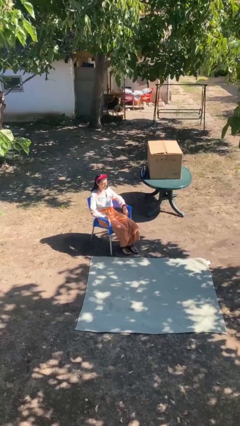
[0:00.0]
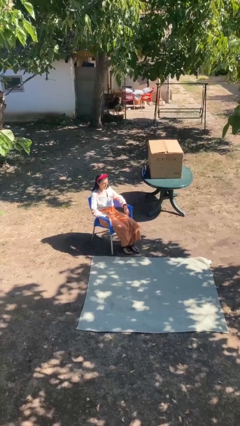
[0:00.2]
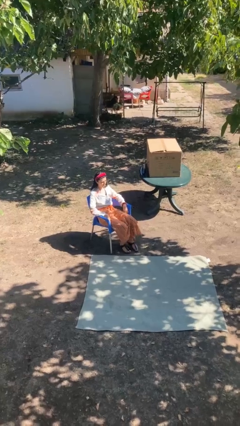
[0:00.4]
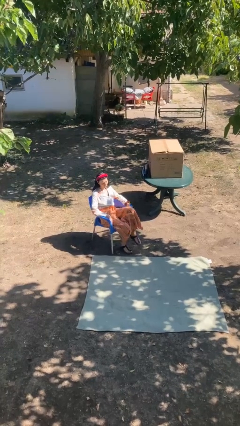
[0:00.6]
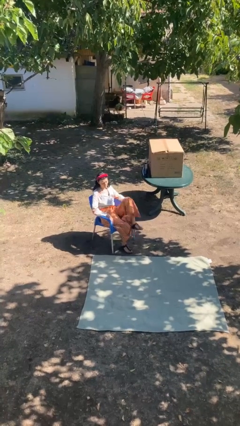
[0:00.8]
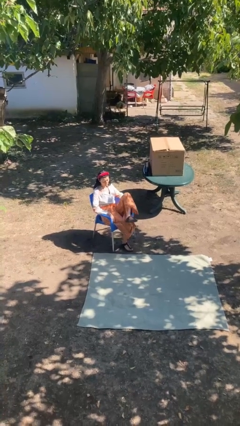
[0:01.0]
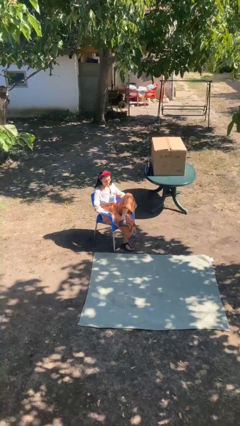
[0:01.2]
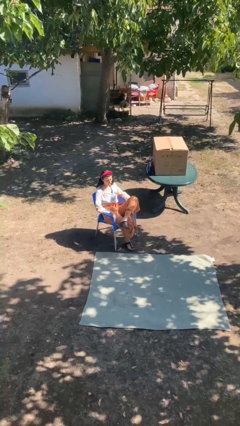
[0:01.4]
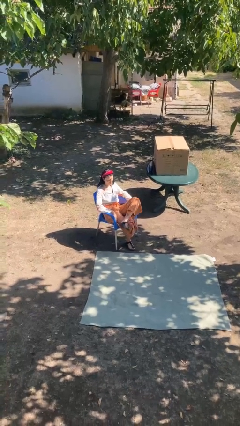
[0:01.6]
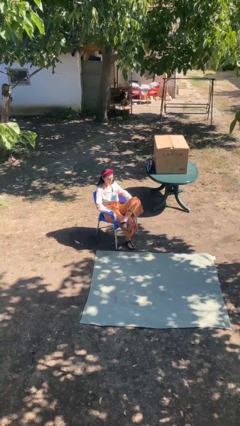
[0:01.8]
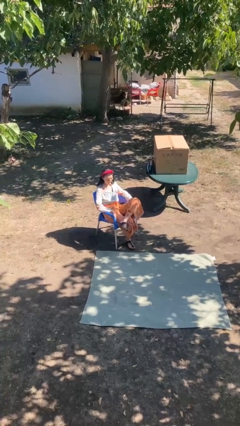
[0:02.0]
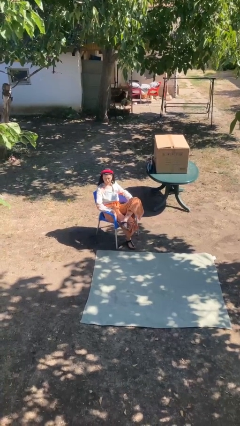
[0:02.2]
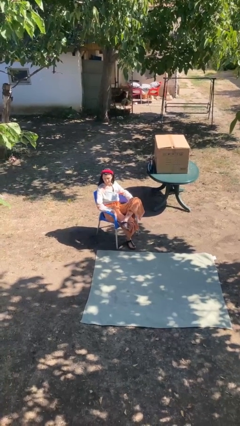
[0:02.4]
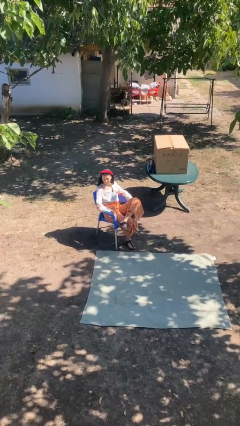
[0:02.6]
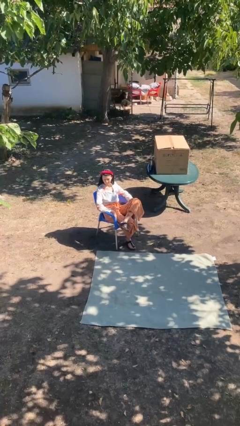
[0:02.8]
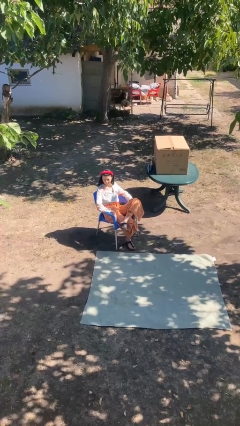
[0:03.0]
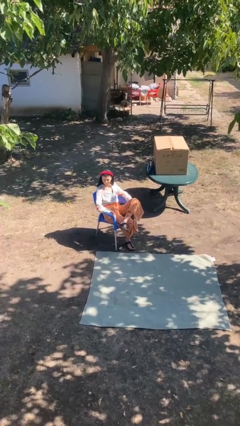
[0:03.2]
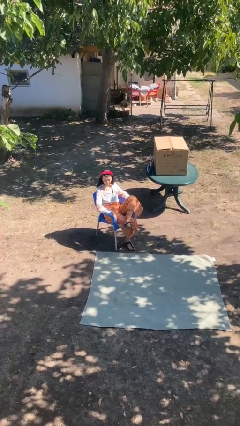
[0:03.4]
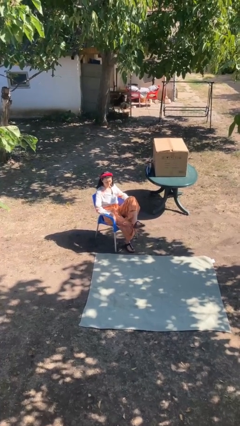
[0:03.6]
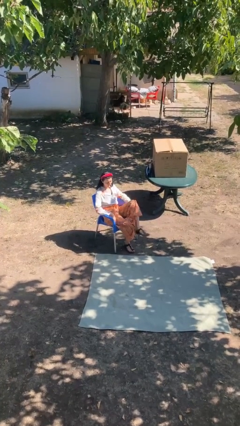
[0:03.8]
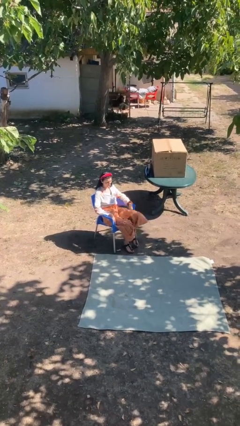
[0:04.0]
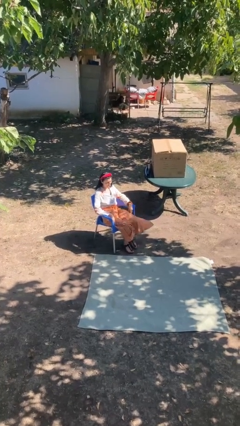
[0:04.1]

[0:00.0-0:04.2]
person crosses legs

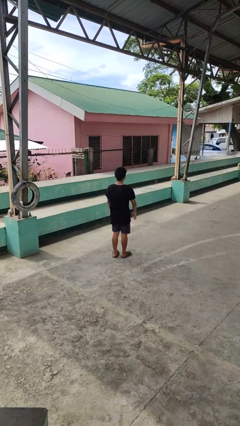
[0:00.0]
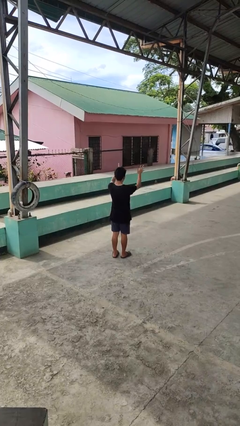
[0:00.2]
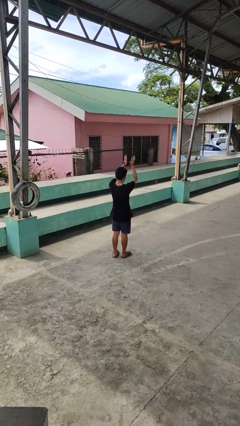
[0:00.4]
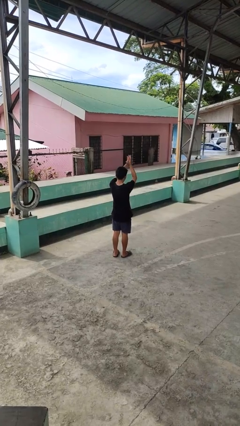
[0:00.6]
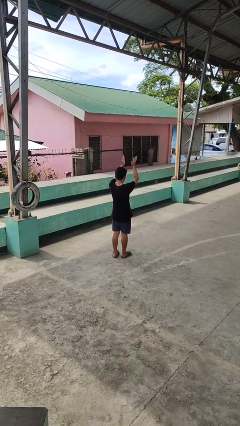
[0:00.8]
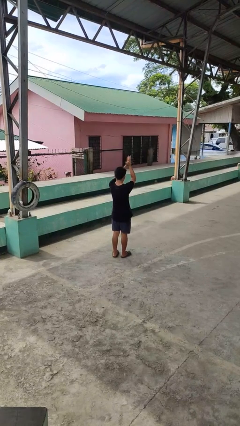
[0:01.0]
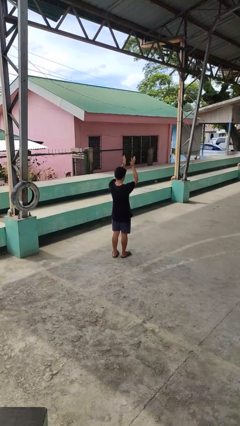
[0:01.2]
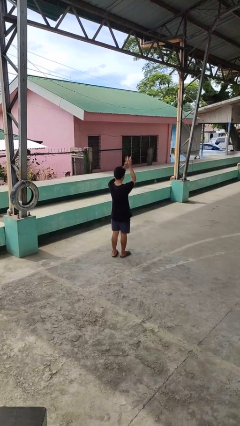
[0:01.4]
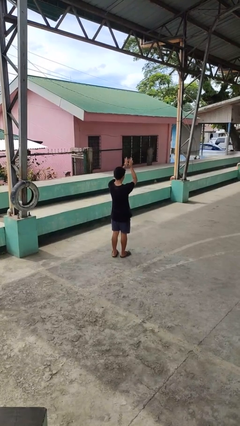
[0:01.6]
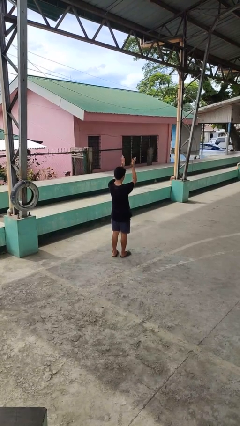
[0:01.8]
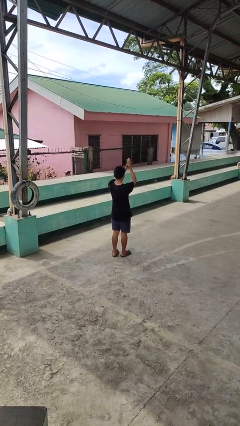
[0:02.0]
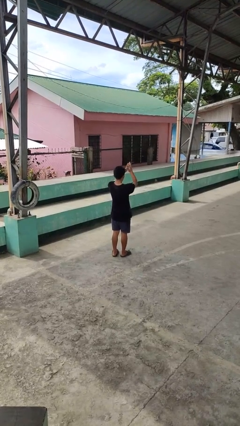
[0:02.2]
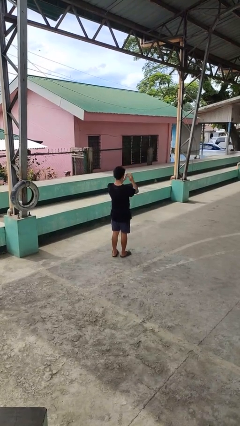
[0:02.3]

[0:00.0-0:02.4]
person claps hands

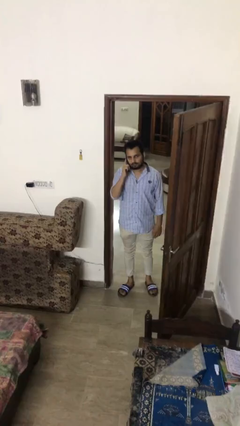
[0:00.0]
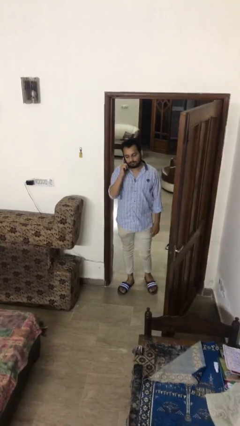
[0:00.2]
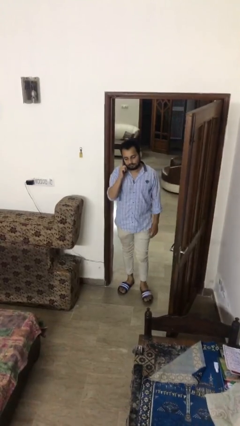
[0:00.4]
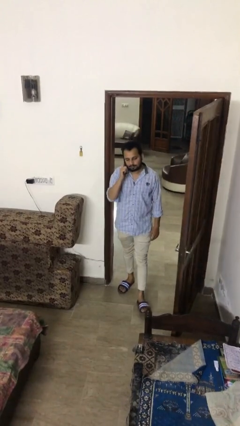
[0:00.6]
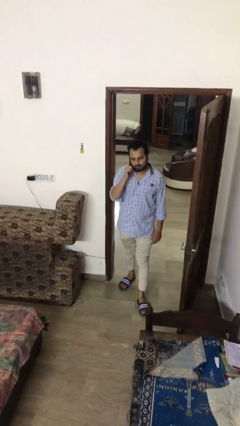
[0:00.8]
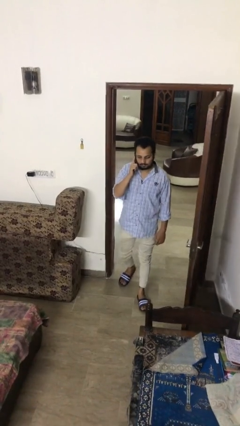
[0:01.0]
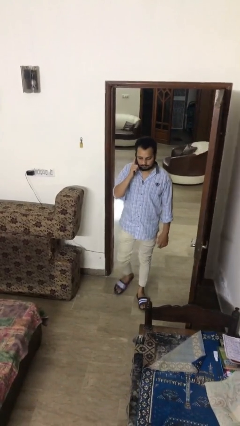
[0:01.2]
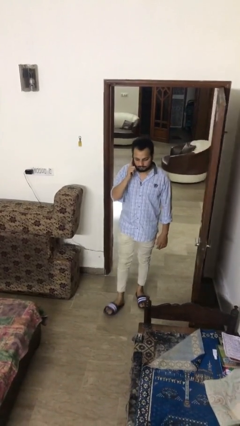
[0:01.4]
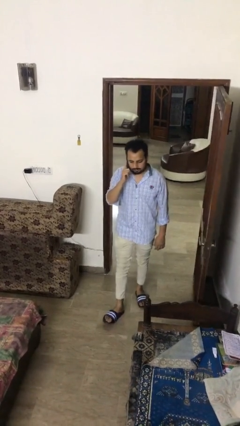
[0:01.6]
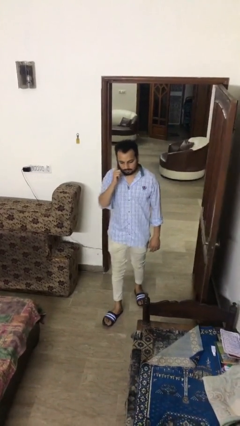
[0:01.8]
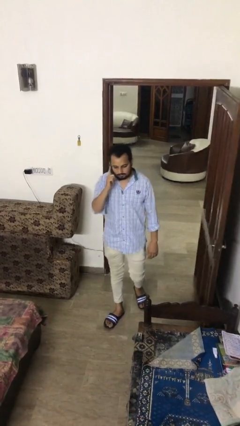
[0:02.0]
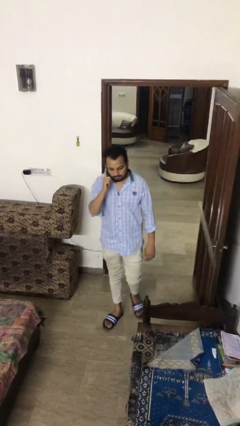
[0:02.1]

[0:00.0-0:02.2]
person enters scene through structure

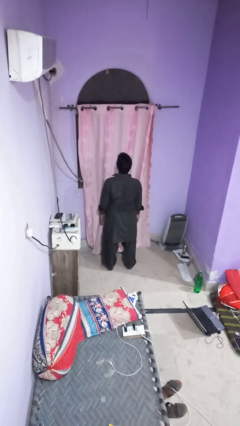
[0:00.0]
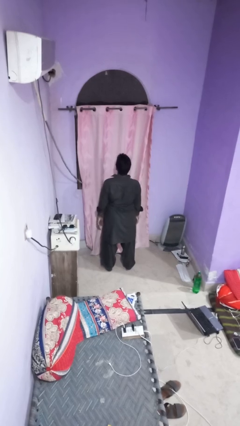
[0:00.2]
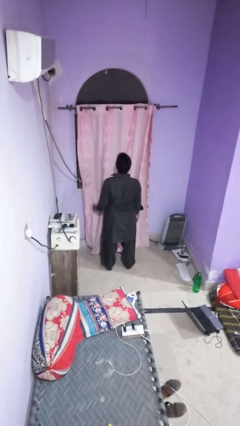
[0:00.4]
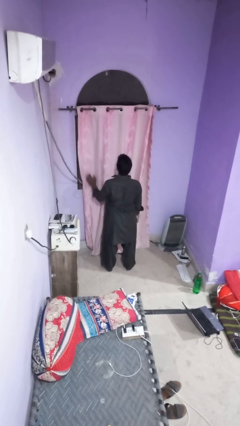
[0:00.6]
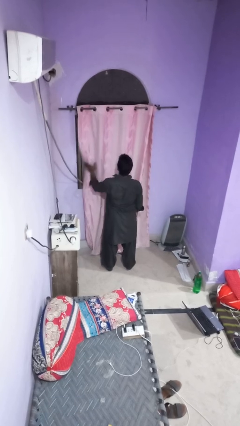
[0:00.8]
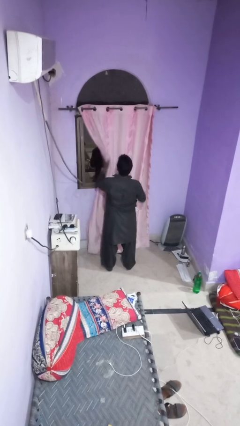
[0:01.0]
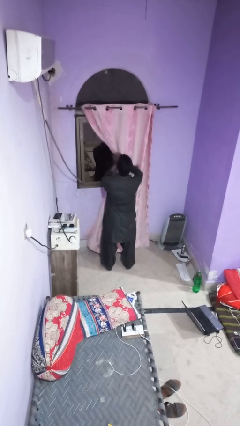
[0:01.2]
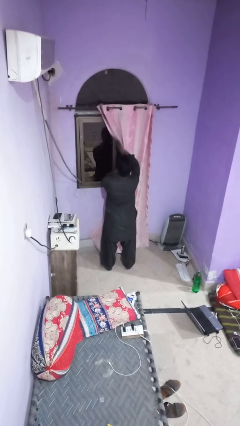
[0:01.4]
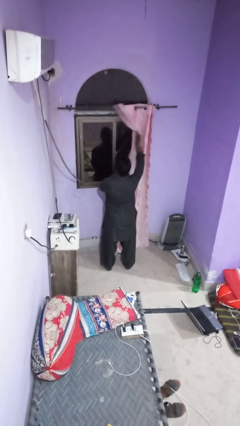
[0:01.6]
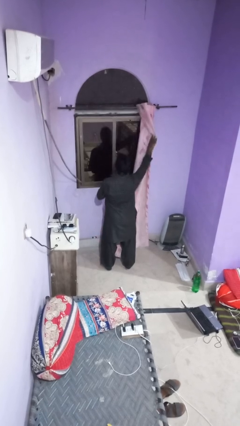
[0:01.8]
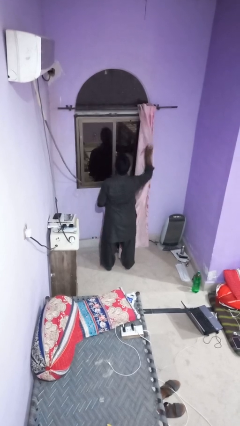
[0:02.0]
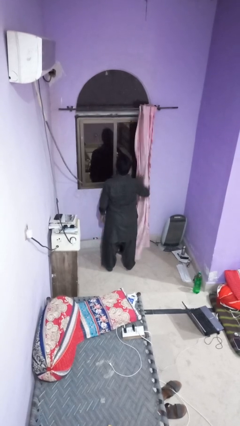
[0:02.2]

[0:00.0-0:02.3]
person opens curtains

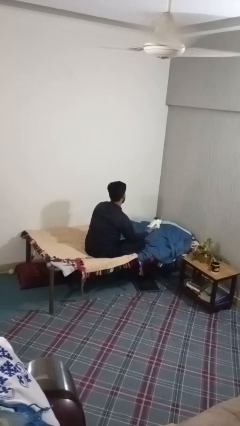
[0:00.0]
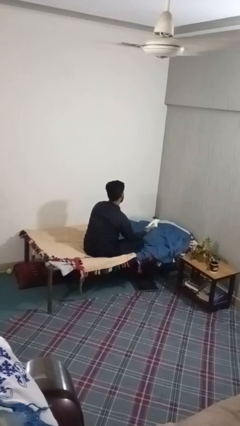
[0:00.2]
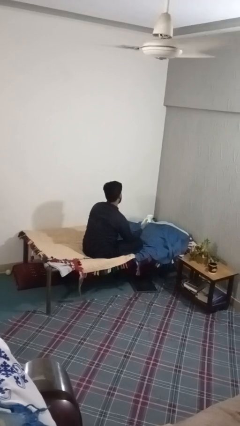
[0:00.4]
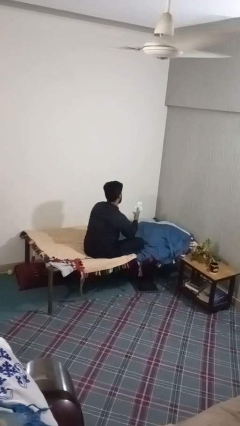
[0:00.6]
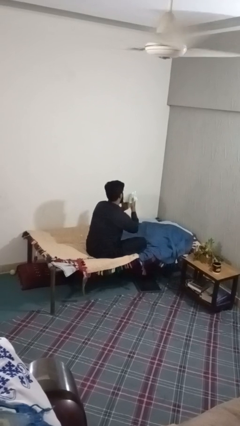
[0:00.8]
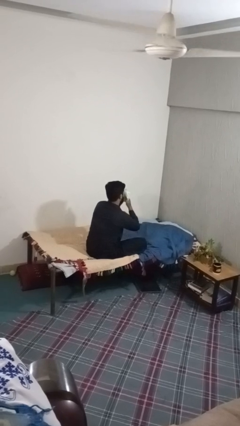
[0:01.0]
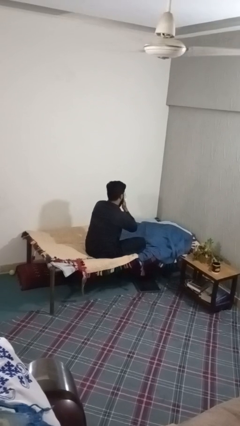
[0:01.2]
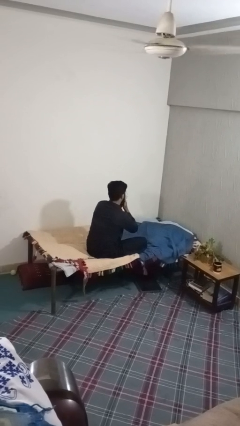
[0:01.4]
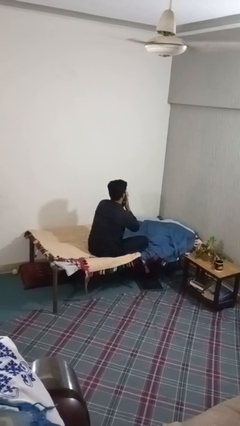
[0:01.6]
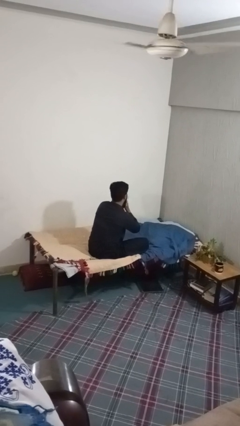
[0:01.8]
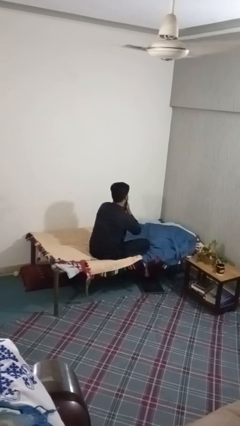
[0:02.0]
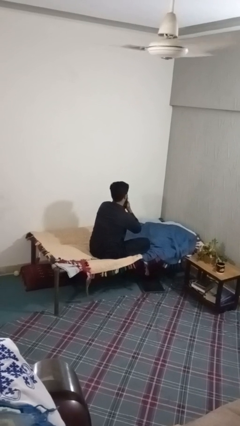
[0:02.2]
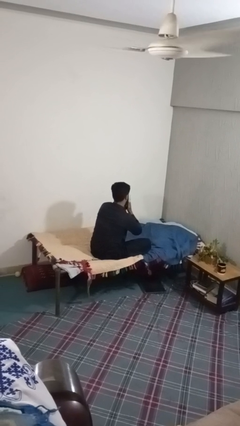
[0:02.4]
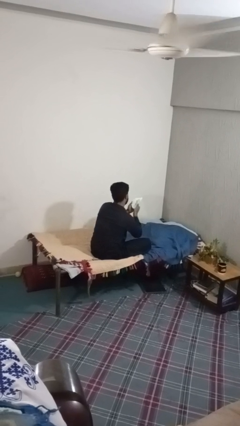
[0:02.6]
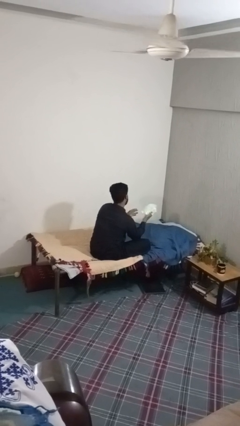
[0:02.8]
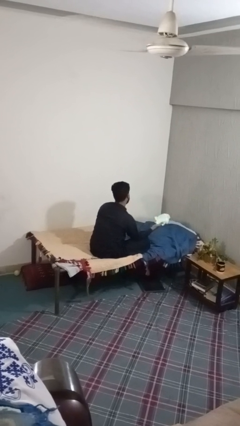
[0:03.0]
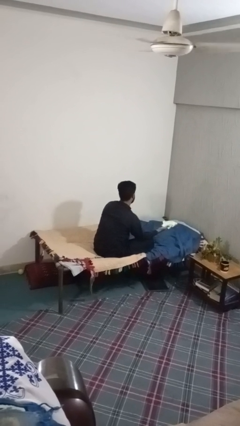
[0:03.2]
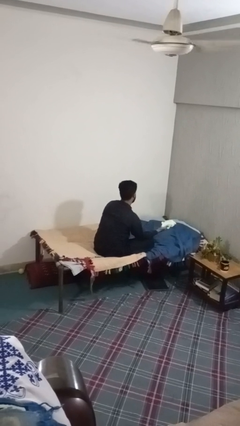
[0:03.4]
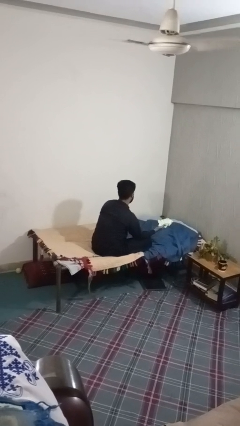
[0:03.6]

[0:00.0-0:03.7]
person blows nose

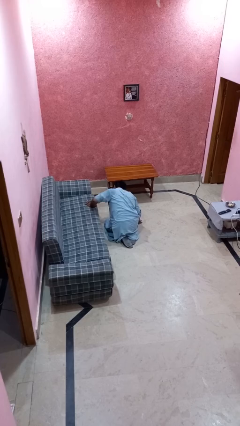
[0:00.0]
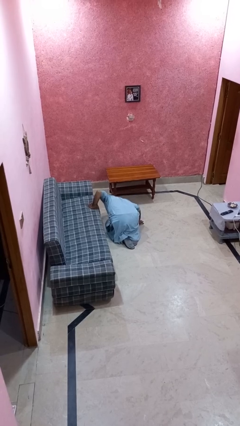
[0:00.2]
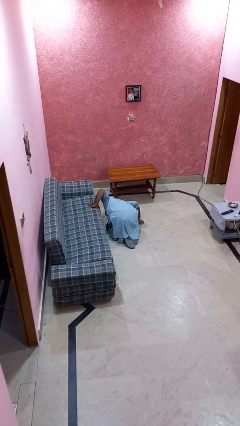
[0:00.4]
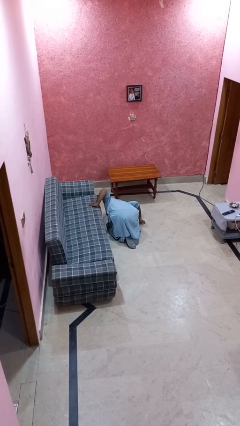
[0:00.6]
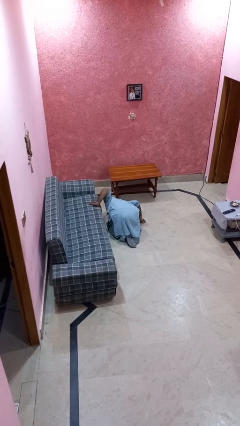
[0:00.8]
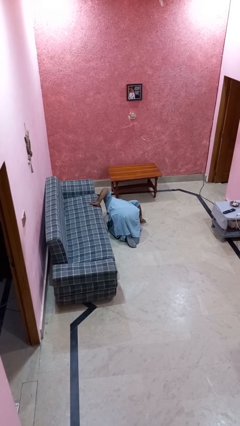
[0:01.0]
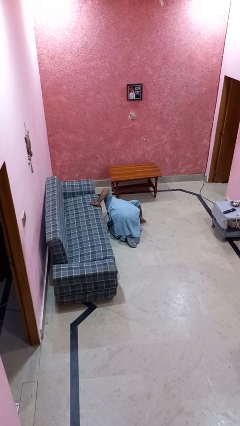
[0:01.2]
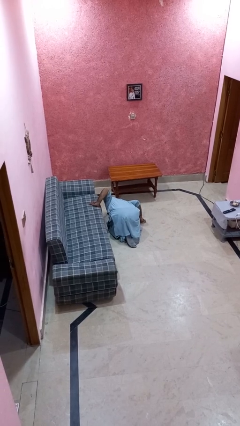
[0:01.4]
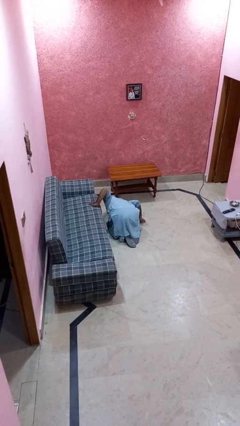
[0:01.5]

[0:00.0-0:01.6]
person searches under couch

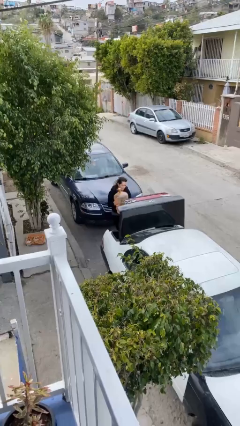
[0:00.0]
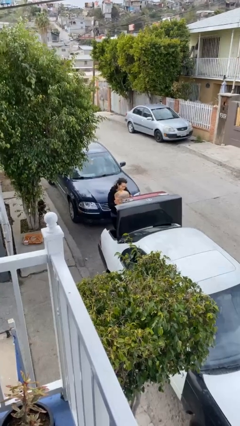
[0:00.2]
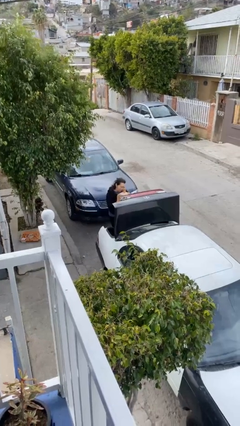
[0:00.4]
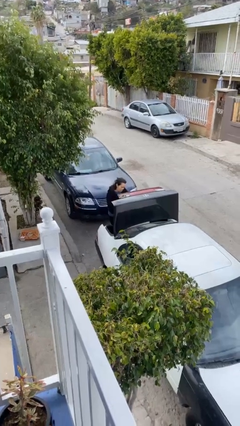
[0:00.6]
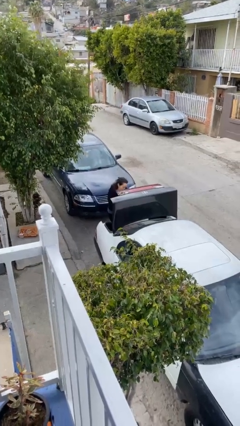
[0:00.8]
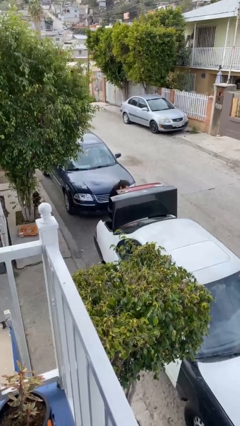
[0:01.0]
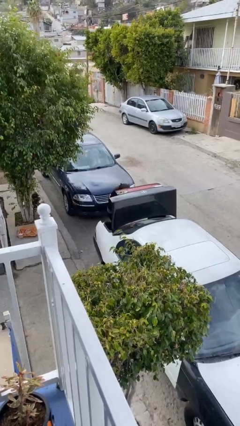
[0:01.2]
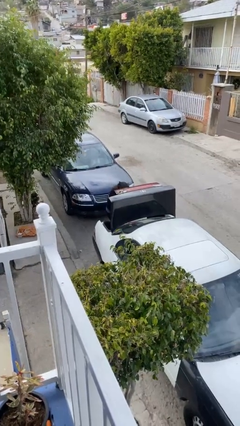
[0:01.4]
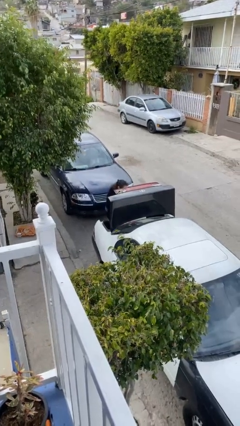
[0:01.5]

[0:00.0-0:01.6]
person loads car
